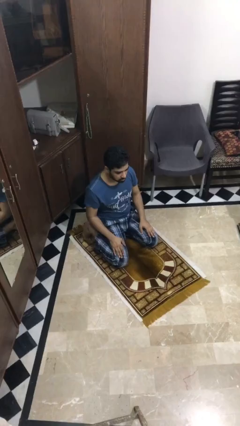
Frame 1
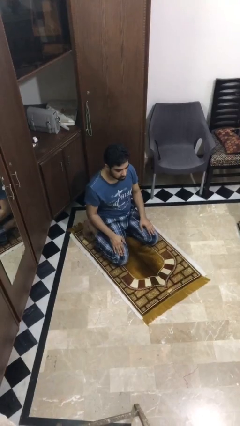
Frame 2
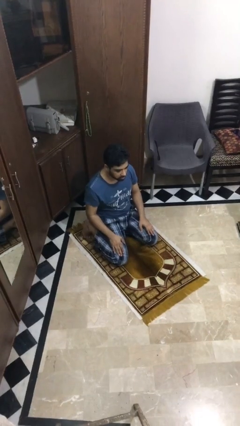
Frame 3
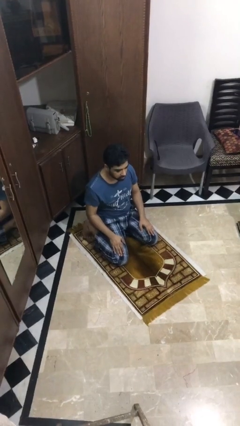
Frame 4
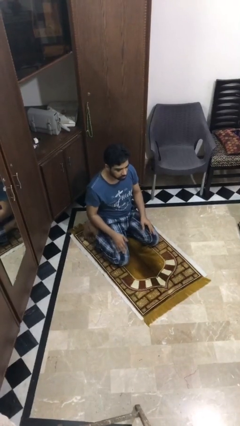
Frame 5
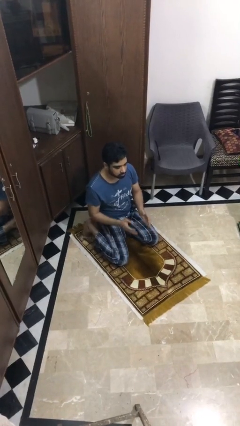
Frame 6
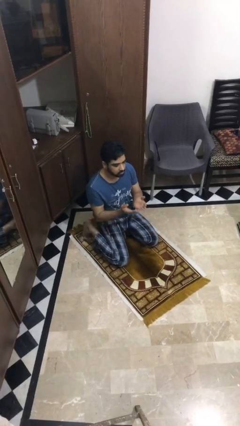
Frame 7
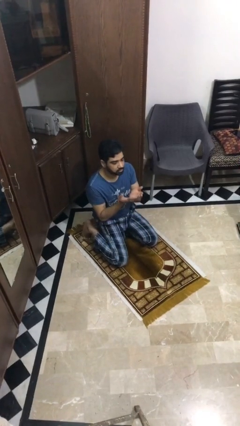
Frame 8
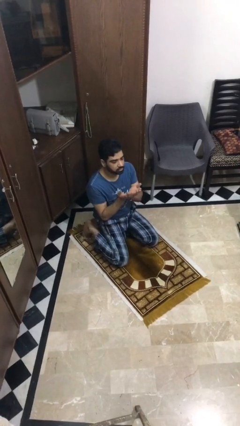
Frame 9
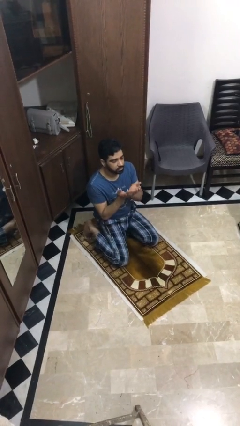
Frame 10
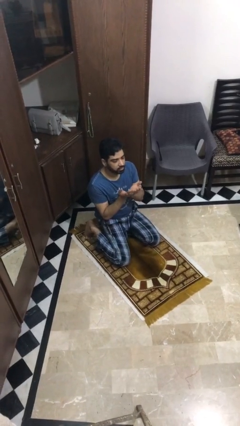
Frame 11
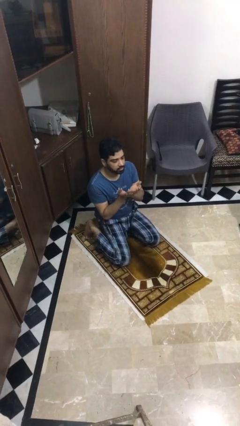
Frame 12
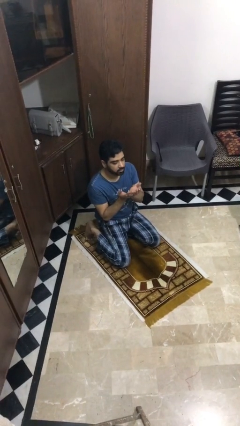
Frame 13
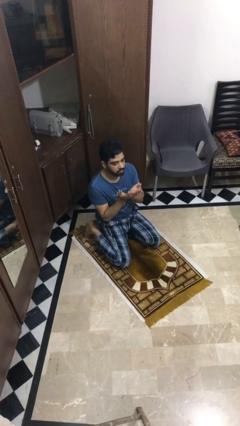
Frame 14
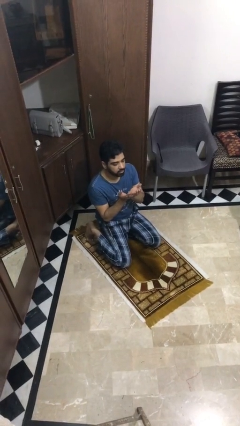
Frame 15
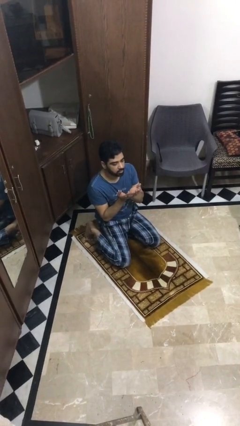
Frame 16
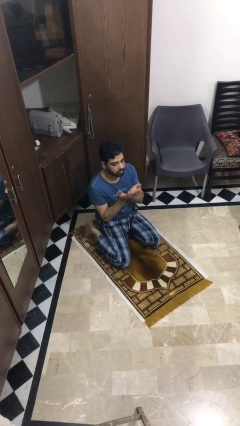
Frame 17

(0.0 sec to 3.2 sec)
person prays

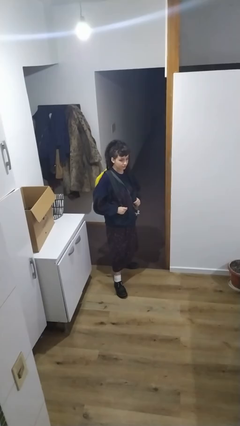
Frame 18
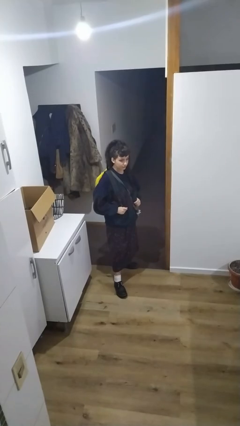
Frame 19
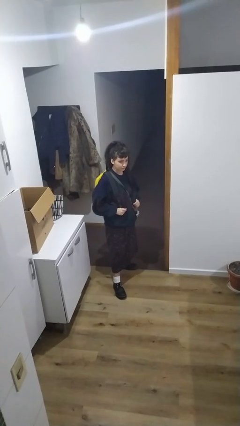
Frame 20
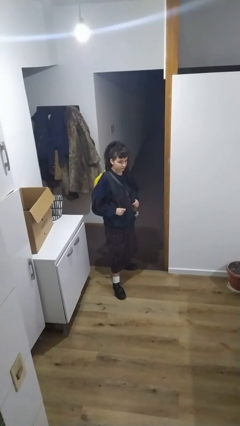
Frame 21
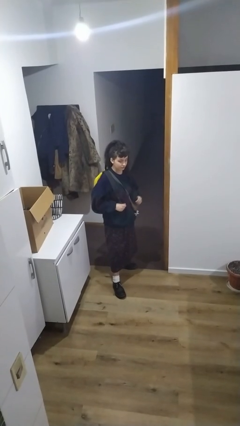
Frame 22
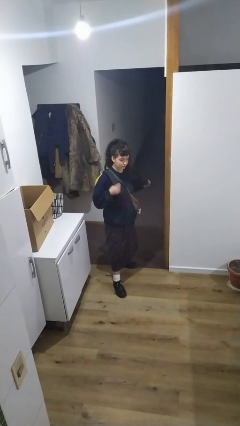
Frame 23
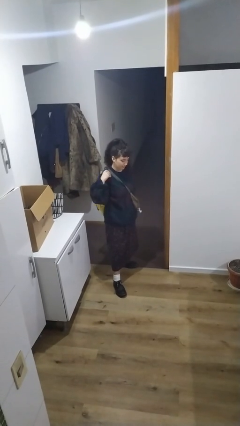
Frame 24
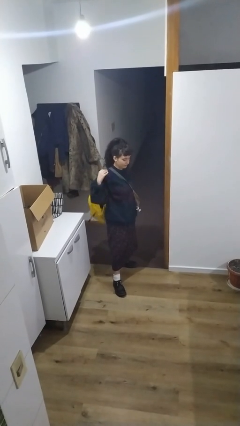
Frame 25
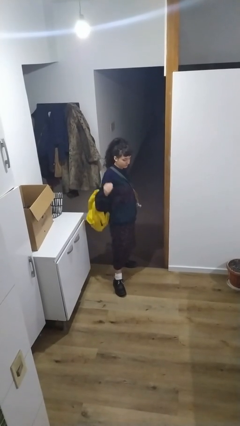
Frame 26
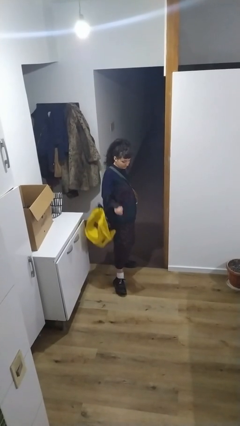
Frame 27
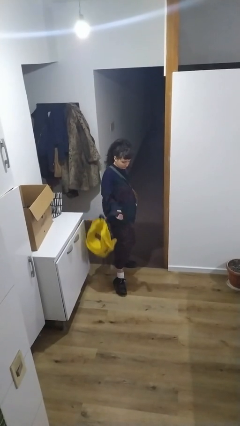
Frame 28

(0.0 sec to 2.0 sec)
person takes off backpack

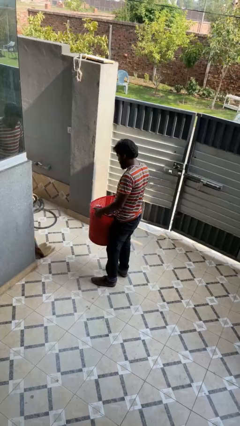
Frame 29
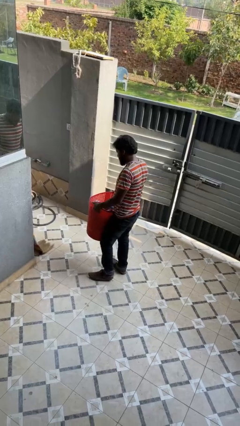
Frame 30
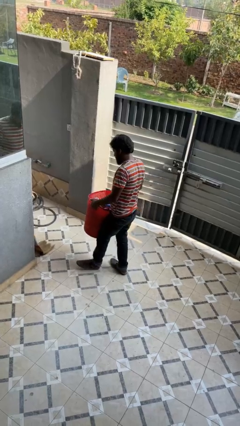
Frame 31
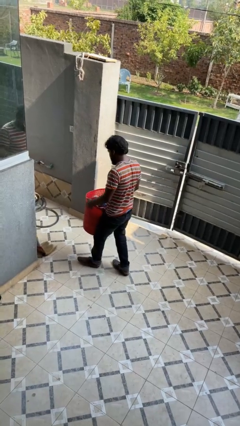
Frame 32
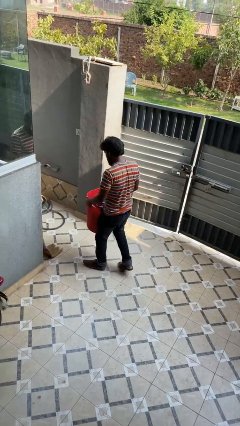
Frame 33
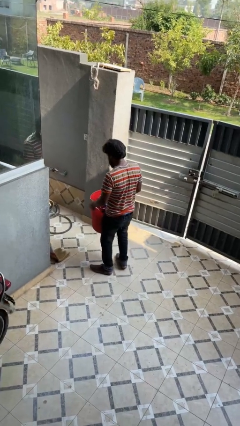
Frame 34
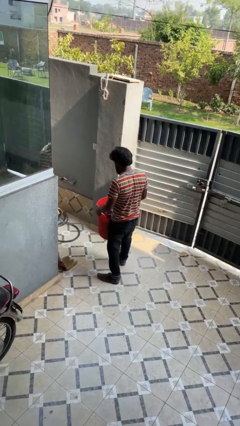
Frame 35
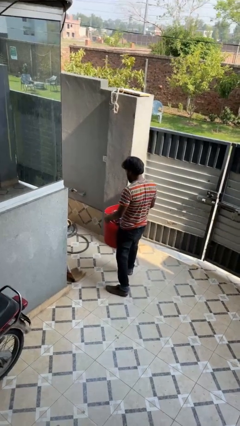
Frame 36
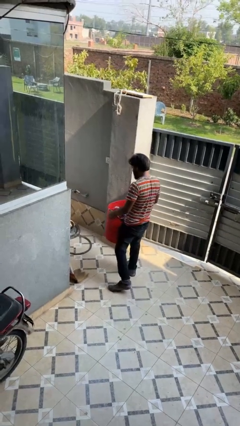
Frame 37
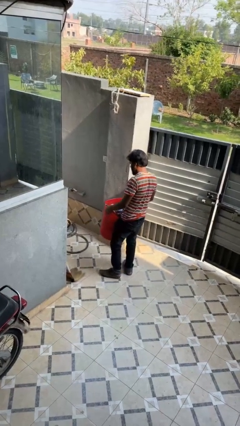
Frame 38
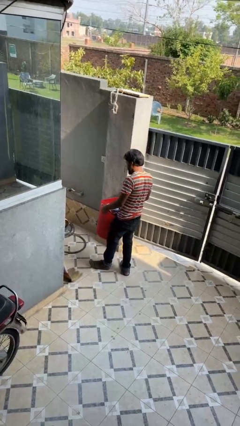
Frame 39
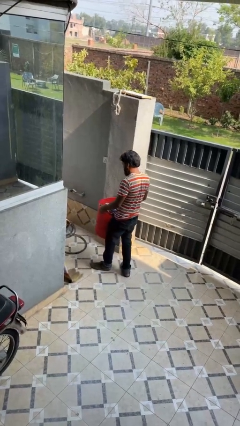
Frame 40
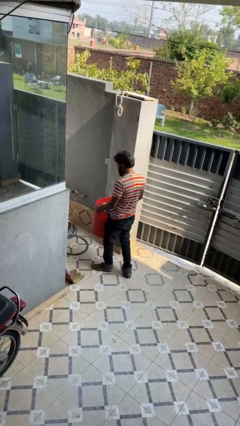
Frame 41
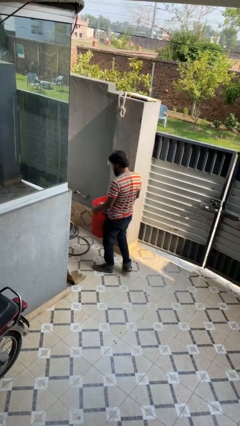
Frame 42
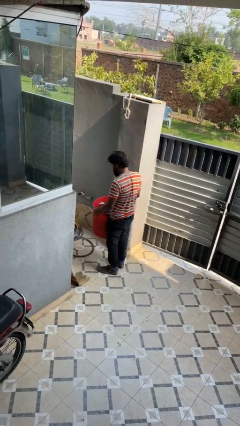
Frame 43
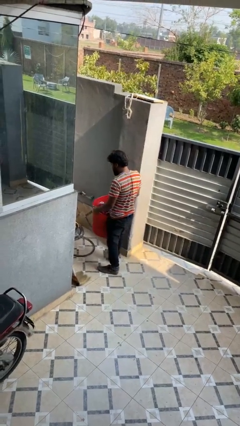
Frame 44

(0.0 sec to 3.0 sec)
person carries laundry basket

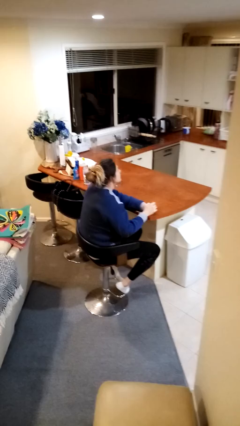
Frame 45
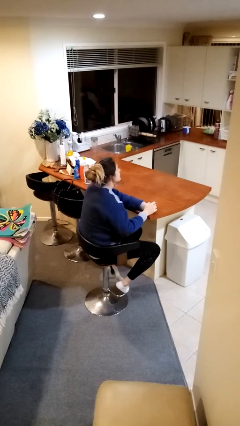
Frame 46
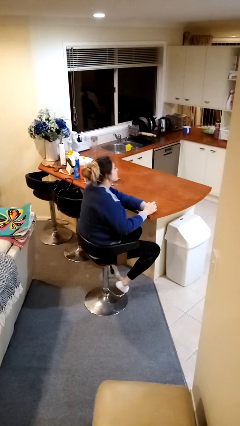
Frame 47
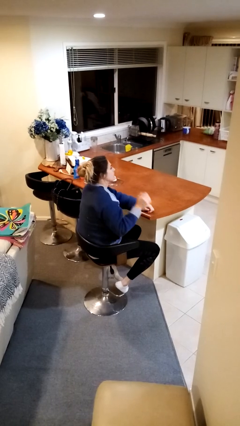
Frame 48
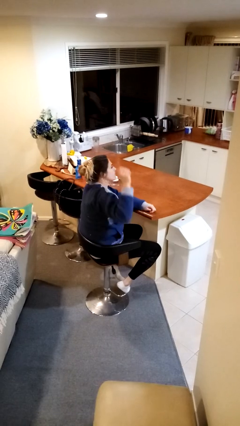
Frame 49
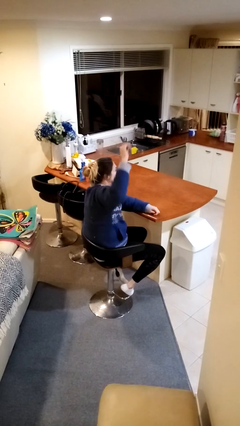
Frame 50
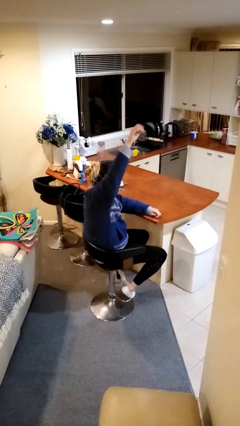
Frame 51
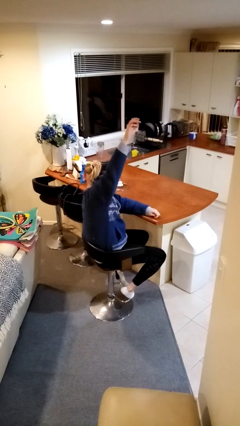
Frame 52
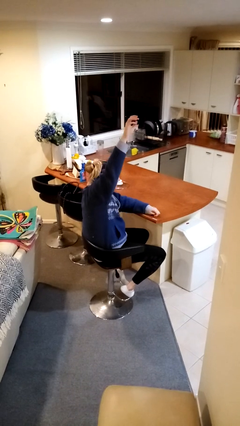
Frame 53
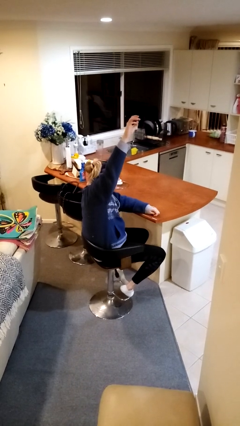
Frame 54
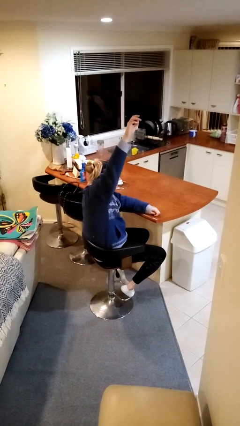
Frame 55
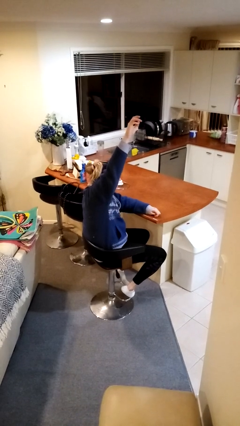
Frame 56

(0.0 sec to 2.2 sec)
person gestures raise hand

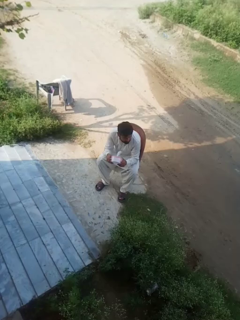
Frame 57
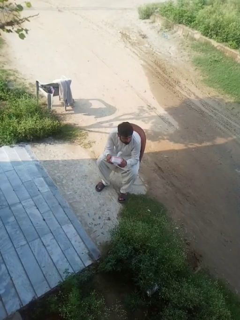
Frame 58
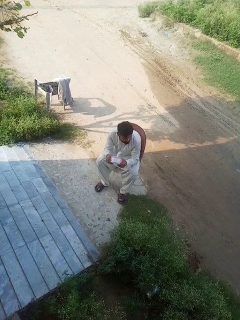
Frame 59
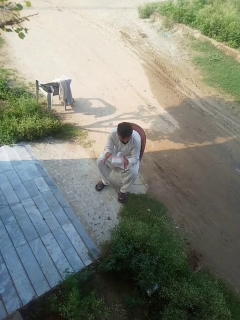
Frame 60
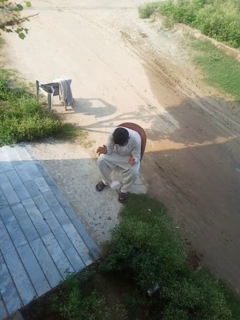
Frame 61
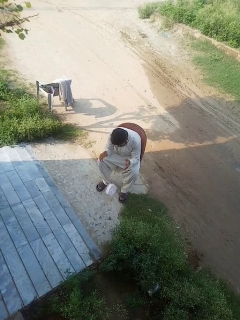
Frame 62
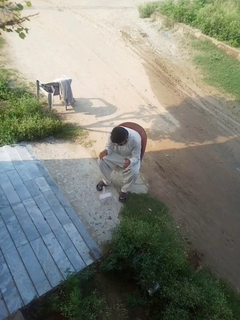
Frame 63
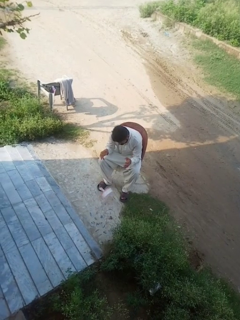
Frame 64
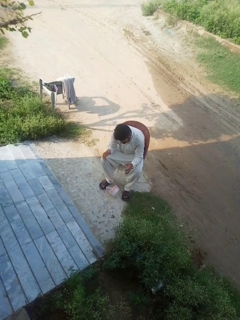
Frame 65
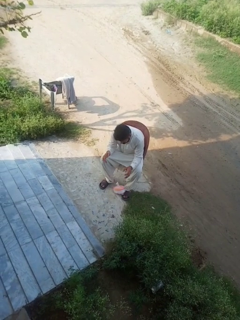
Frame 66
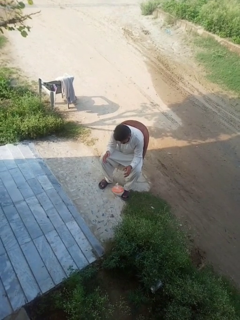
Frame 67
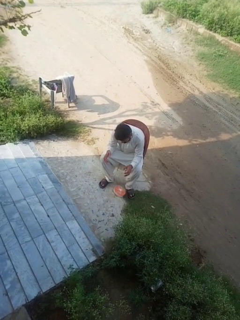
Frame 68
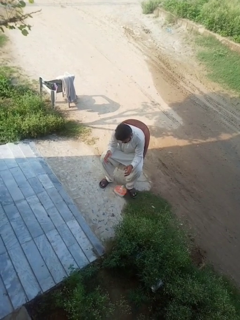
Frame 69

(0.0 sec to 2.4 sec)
person drops object

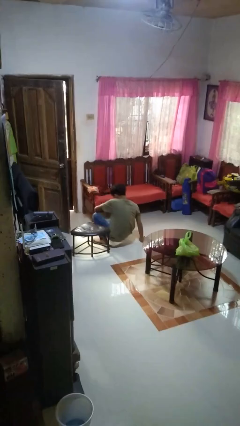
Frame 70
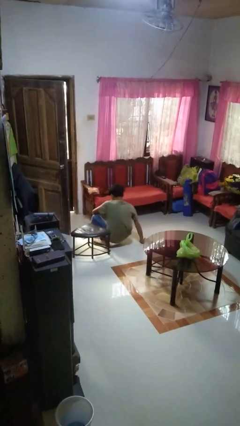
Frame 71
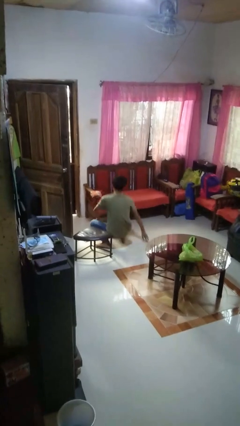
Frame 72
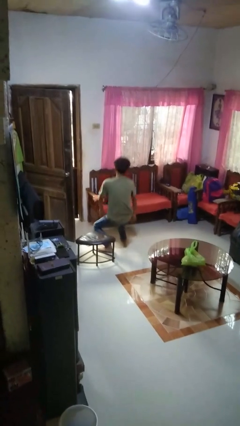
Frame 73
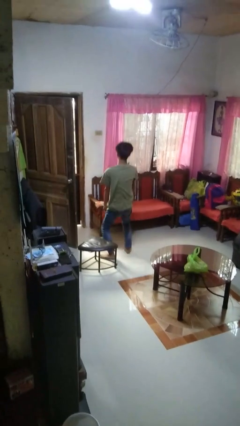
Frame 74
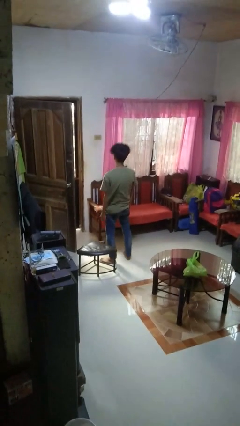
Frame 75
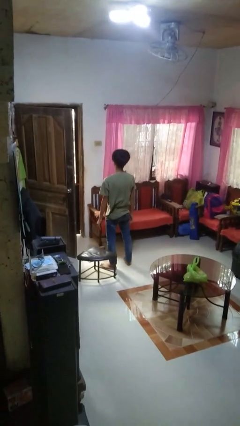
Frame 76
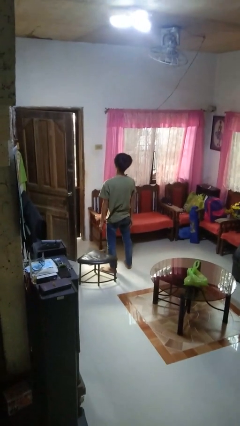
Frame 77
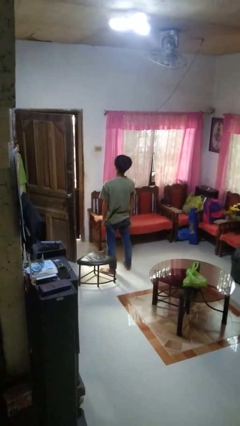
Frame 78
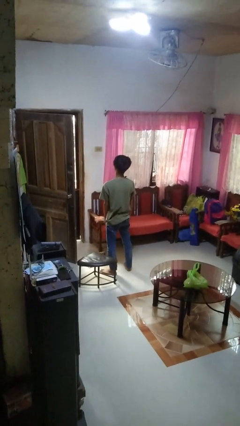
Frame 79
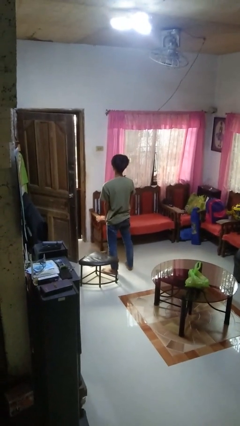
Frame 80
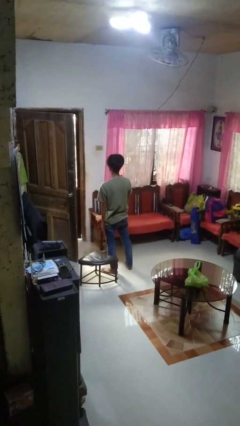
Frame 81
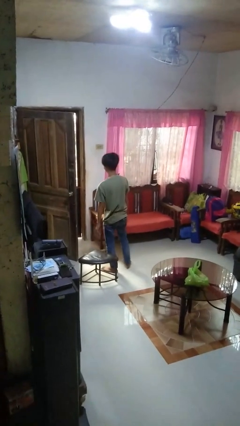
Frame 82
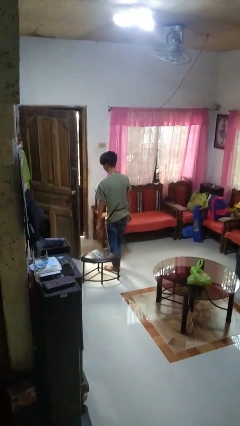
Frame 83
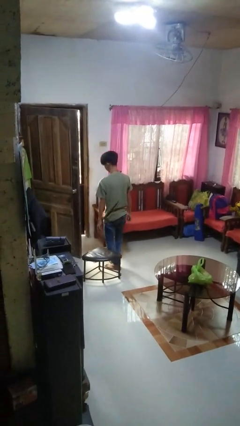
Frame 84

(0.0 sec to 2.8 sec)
person stands up from floor

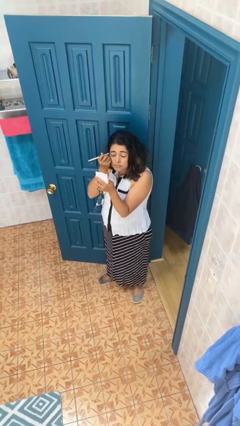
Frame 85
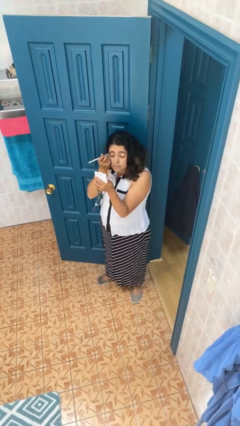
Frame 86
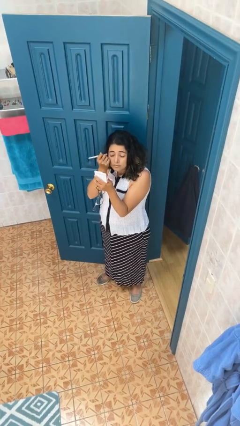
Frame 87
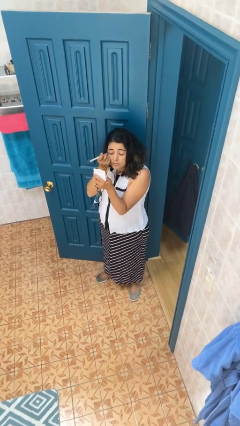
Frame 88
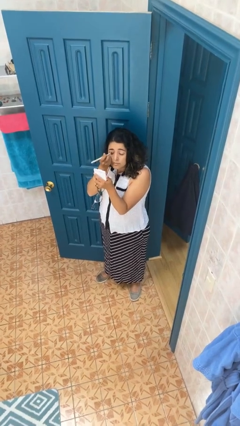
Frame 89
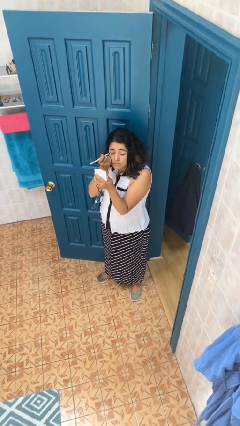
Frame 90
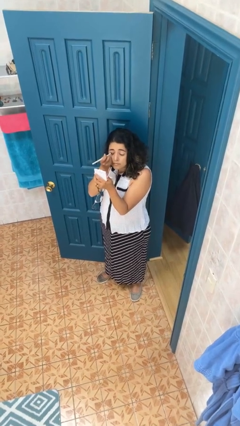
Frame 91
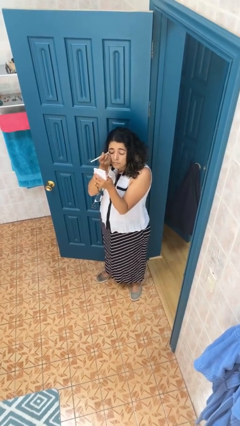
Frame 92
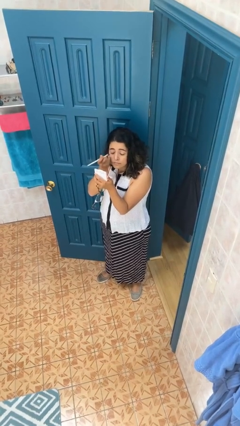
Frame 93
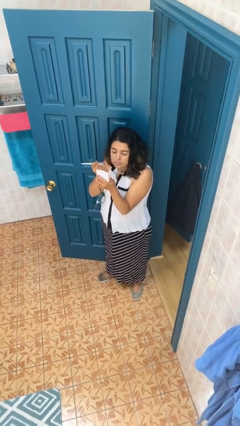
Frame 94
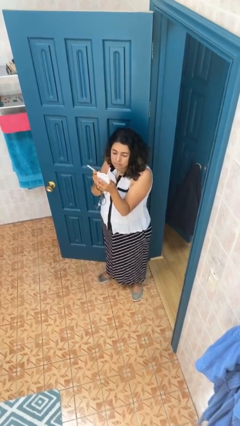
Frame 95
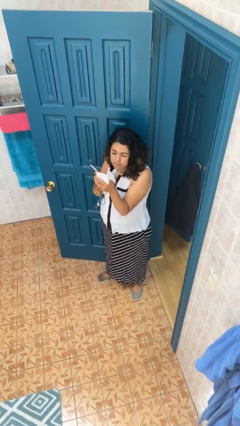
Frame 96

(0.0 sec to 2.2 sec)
person applies eye makeup
